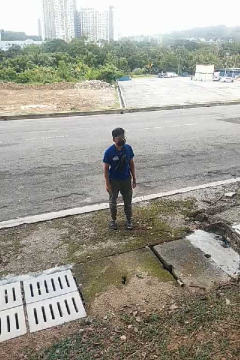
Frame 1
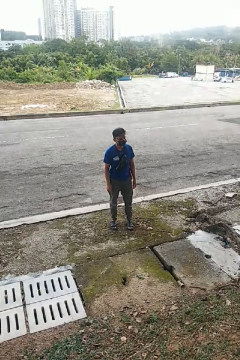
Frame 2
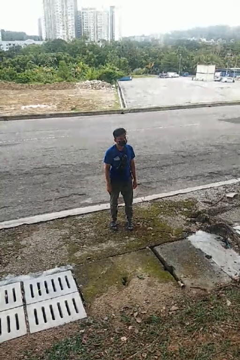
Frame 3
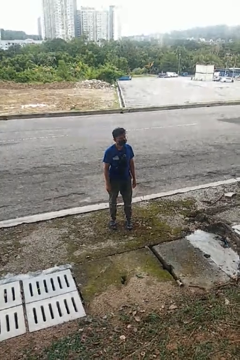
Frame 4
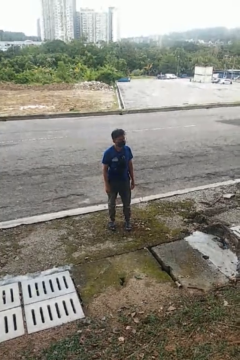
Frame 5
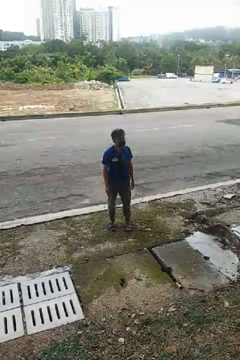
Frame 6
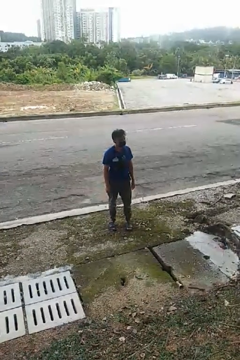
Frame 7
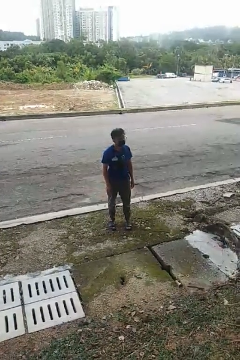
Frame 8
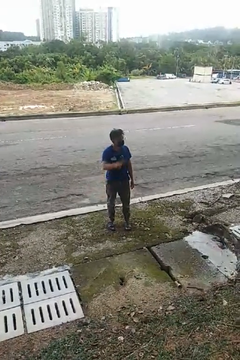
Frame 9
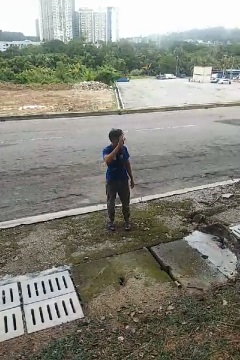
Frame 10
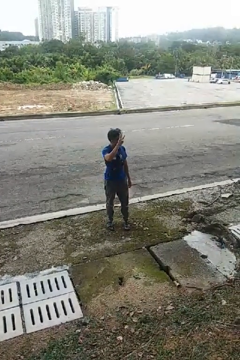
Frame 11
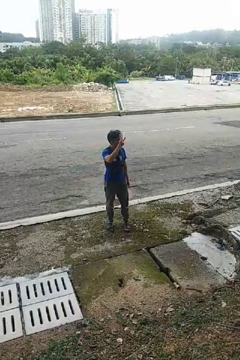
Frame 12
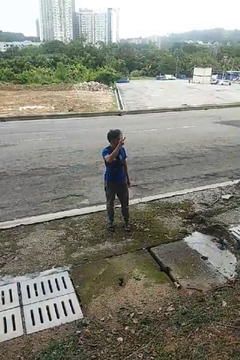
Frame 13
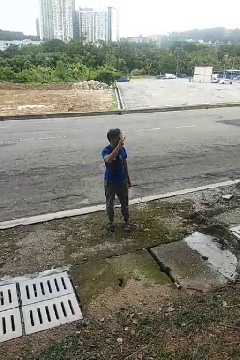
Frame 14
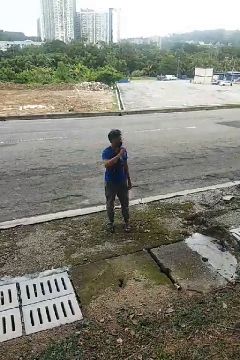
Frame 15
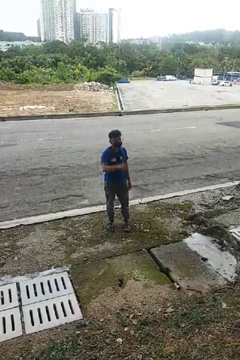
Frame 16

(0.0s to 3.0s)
person gestures number three

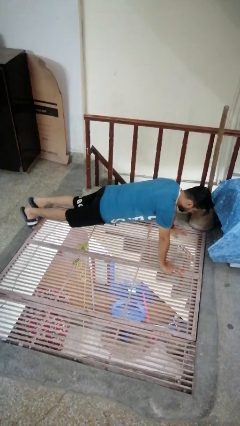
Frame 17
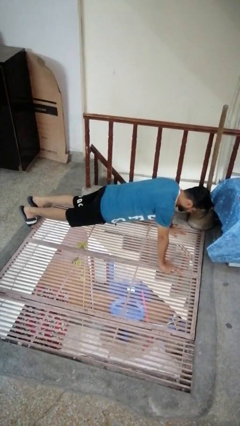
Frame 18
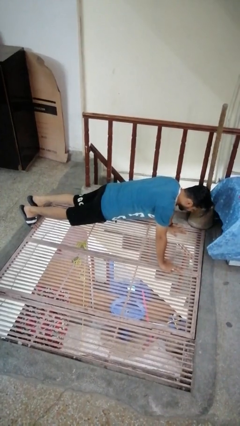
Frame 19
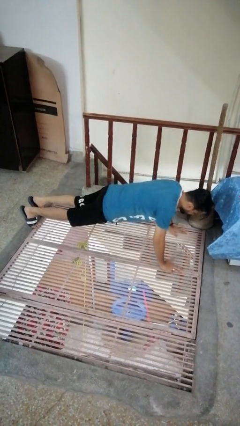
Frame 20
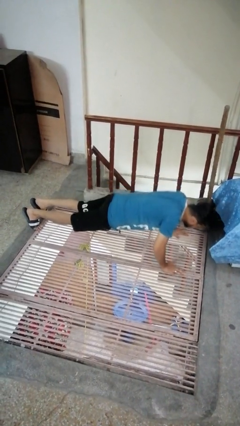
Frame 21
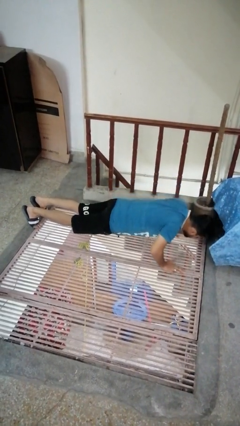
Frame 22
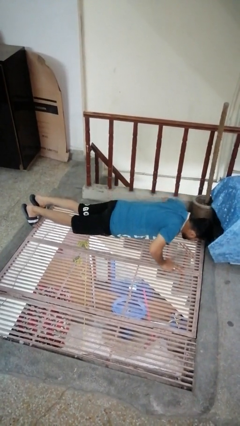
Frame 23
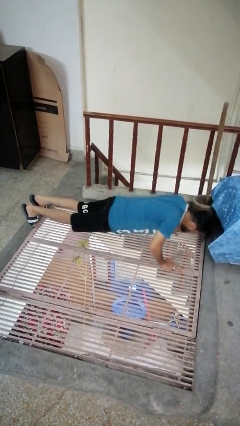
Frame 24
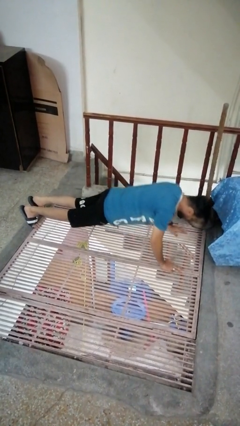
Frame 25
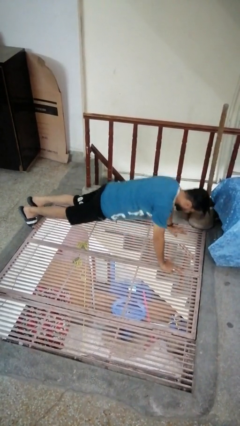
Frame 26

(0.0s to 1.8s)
person exercises with pushup

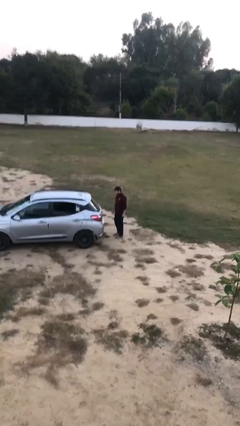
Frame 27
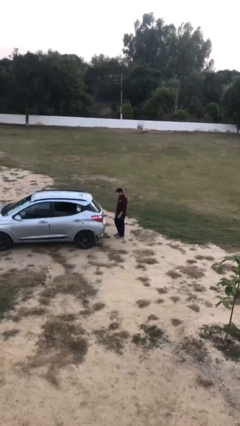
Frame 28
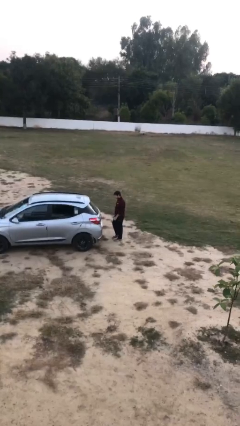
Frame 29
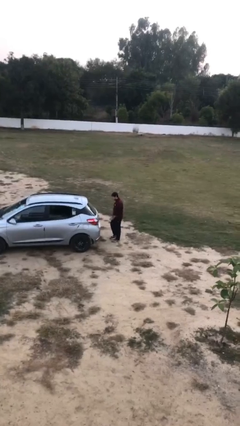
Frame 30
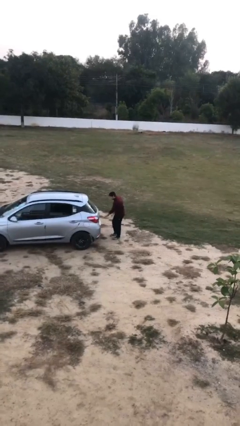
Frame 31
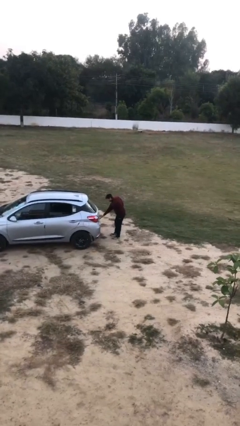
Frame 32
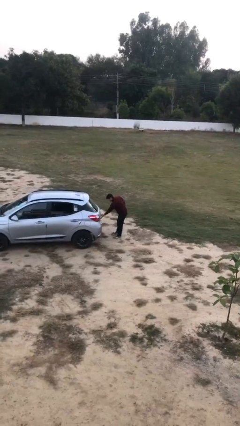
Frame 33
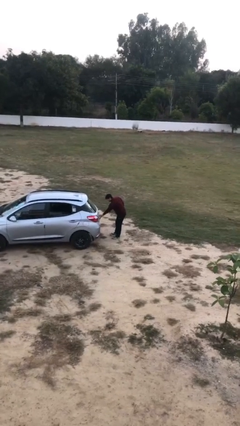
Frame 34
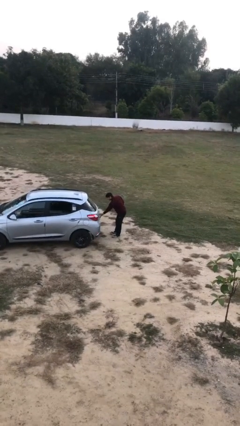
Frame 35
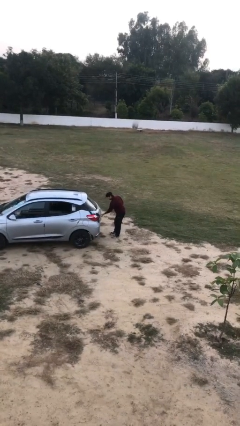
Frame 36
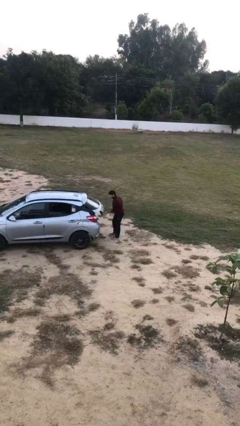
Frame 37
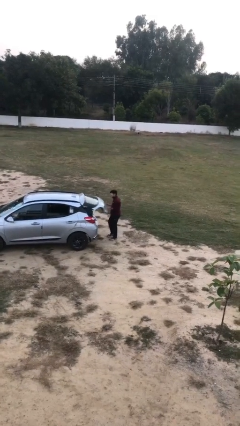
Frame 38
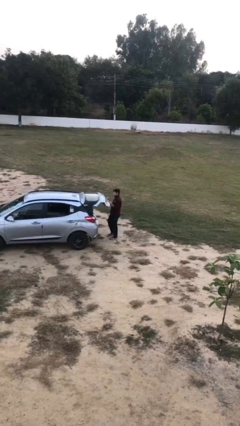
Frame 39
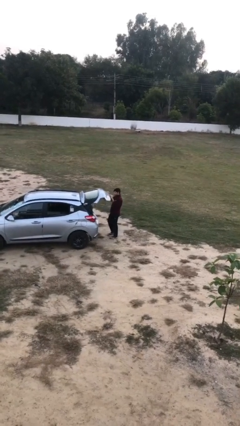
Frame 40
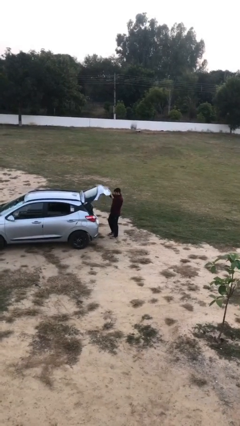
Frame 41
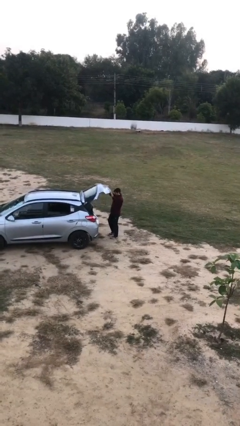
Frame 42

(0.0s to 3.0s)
person opens car trunk

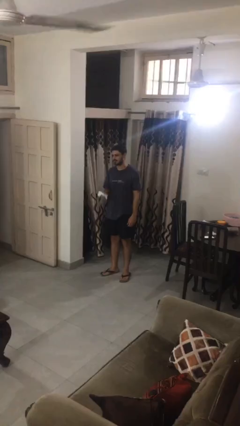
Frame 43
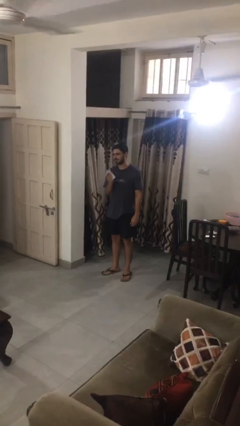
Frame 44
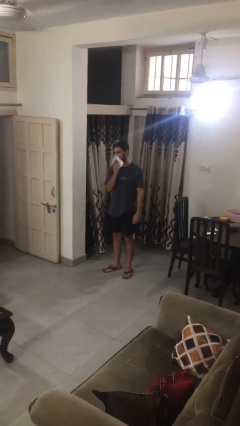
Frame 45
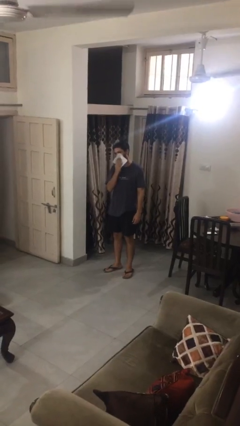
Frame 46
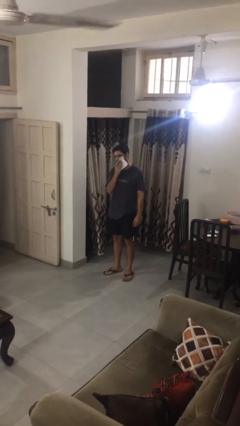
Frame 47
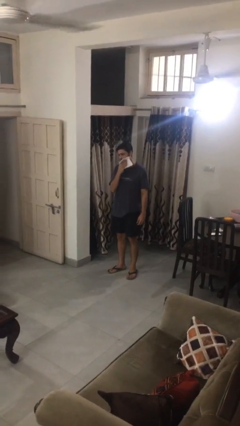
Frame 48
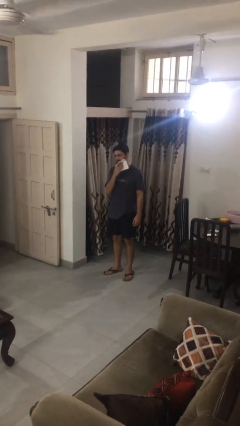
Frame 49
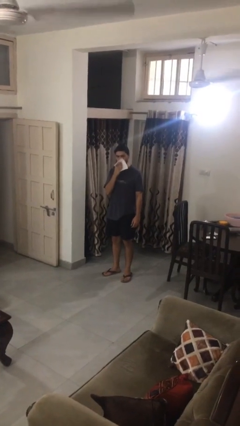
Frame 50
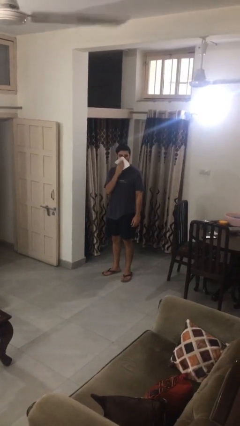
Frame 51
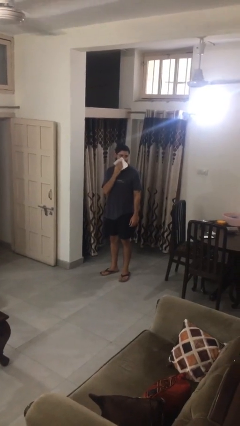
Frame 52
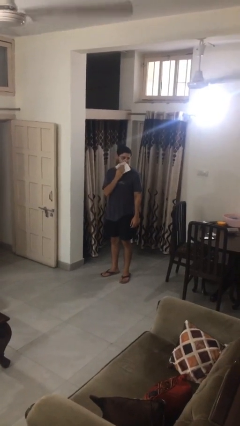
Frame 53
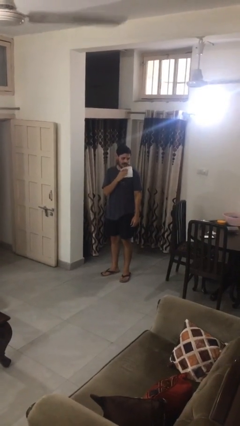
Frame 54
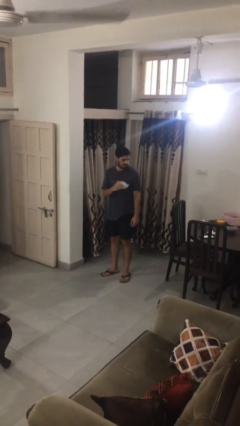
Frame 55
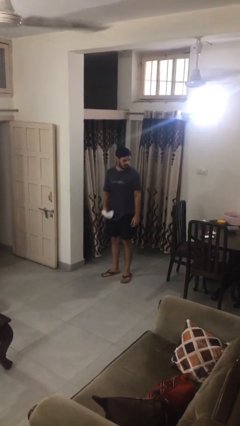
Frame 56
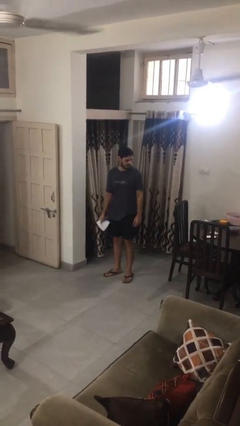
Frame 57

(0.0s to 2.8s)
person wipes mouth with napkin

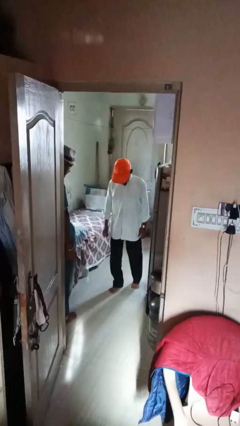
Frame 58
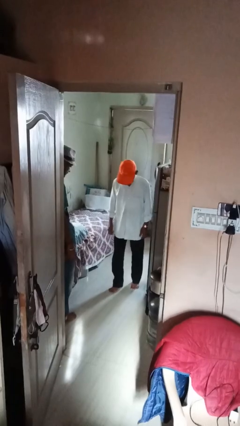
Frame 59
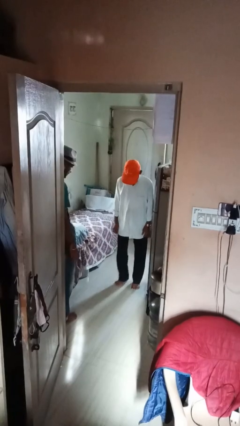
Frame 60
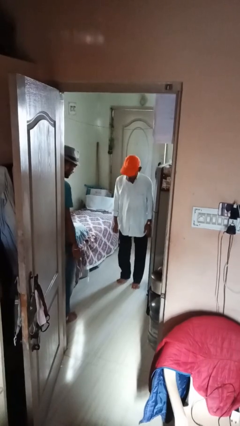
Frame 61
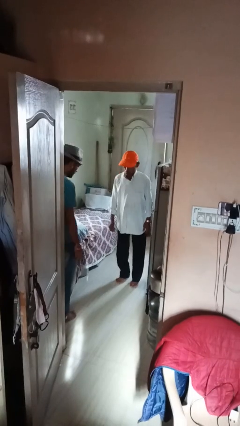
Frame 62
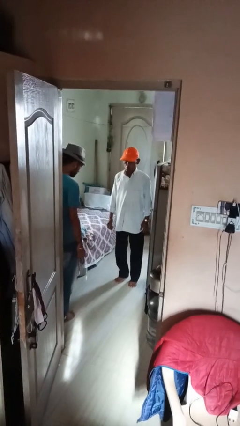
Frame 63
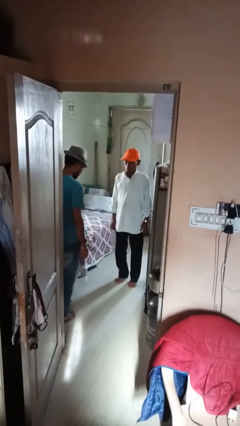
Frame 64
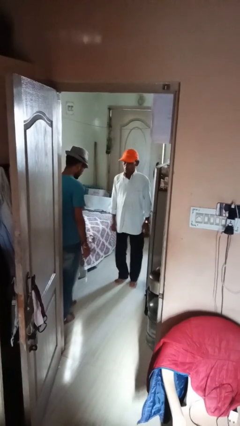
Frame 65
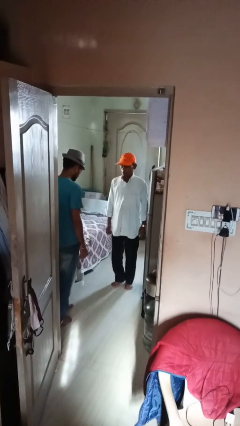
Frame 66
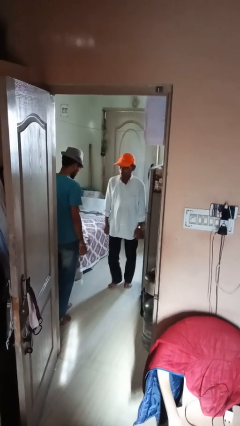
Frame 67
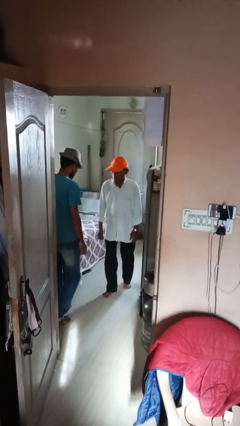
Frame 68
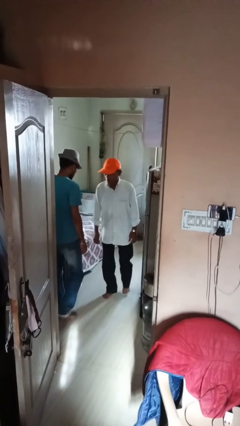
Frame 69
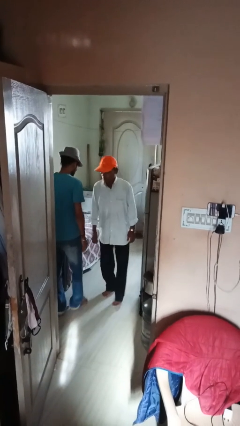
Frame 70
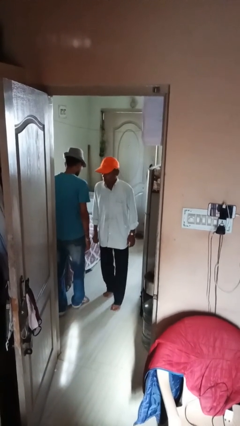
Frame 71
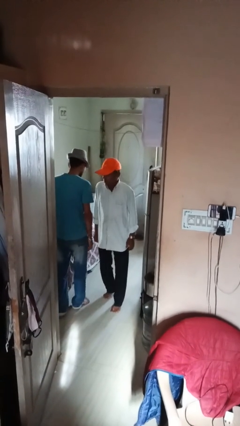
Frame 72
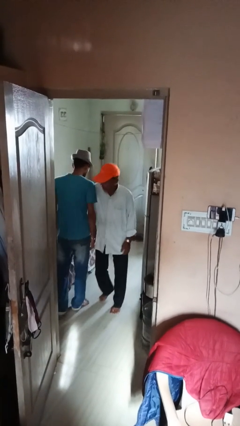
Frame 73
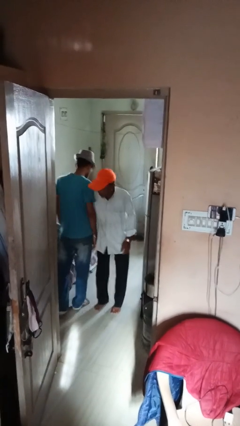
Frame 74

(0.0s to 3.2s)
person bumps into person

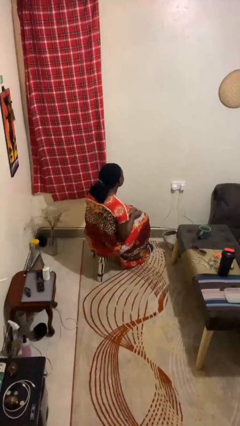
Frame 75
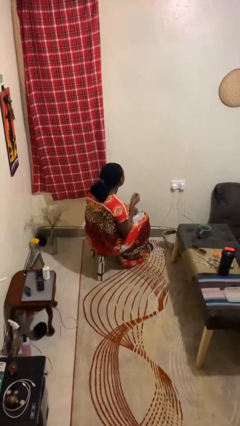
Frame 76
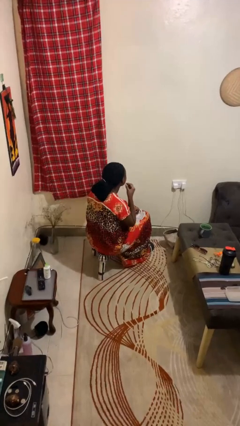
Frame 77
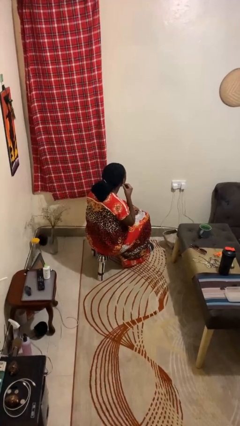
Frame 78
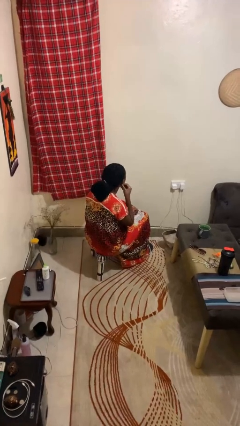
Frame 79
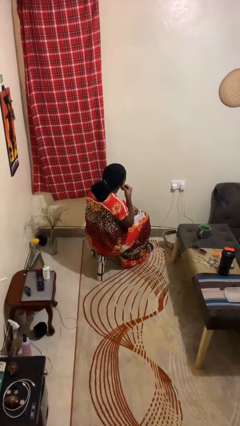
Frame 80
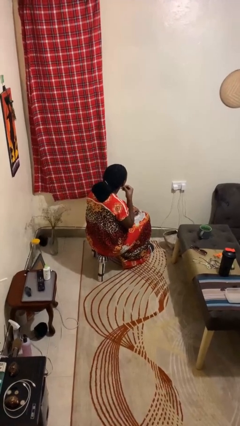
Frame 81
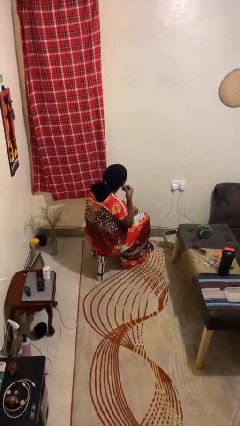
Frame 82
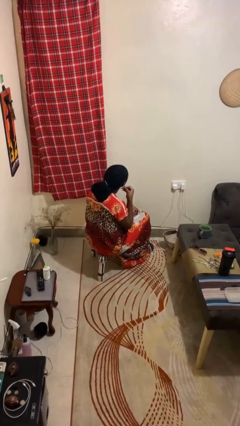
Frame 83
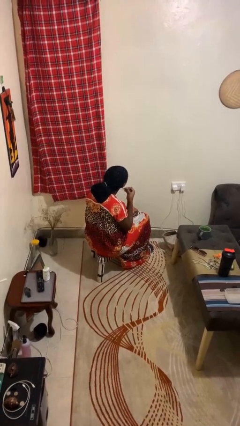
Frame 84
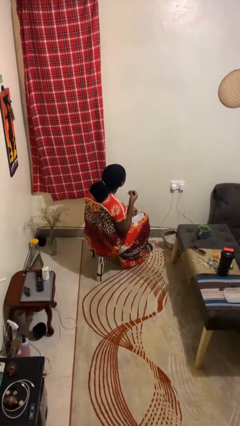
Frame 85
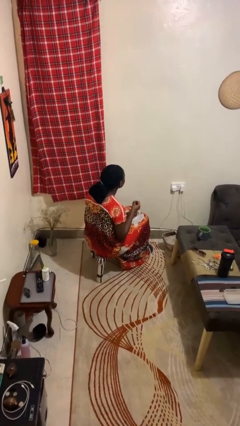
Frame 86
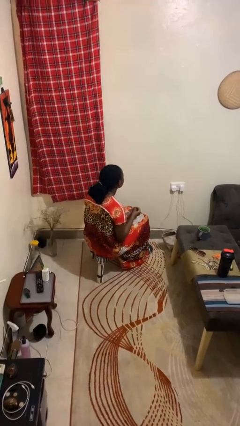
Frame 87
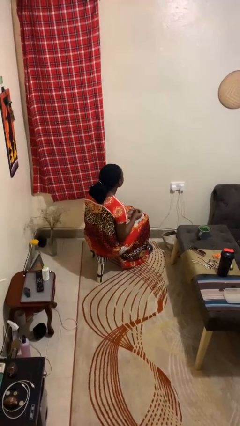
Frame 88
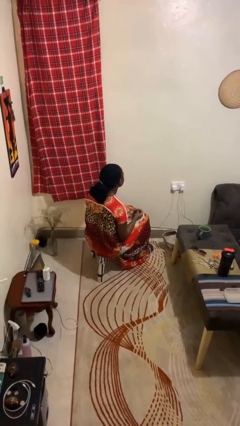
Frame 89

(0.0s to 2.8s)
person takes off earrings

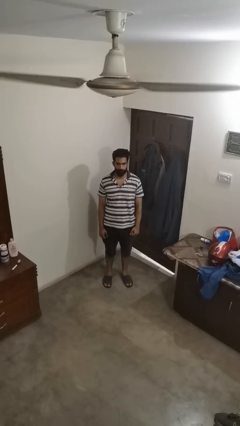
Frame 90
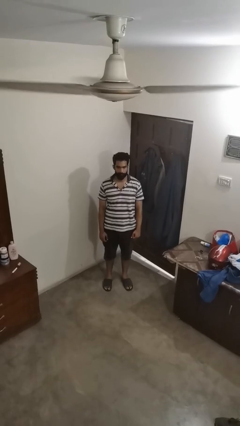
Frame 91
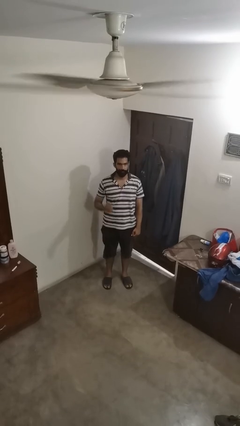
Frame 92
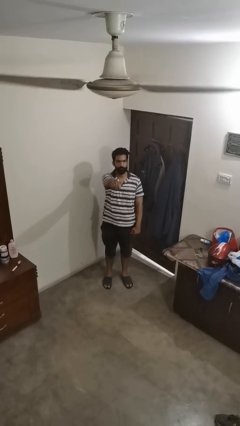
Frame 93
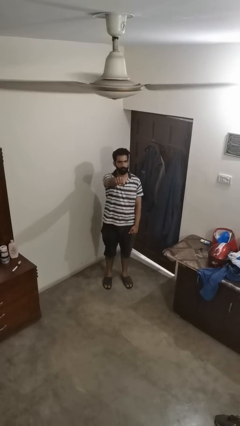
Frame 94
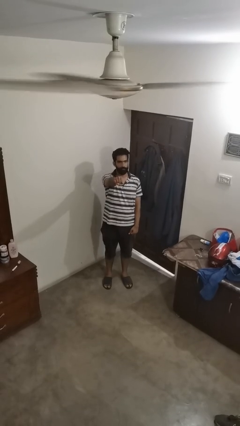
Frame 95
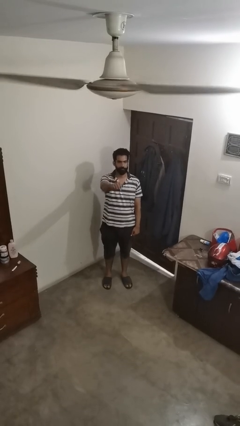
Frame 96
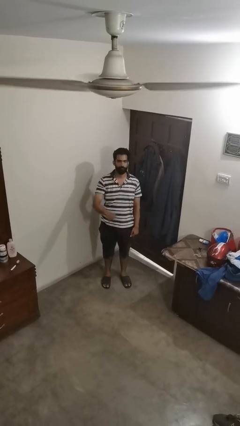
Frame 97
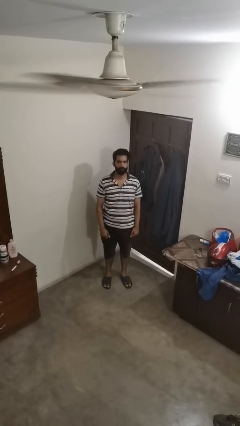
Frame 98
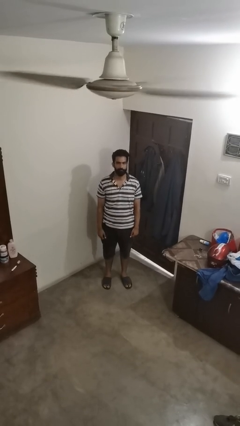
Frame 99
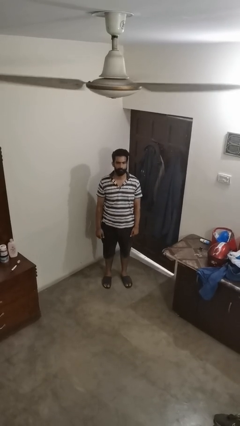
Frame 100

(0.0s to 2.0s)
person punches
